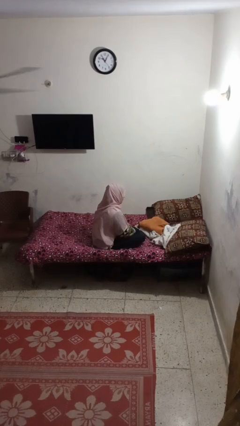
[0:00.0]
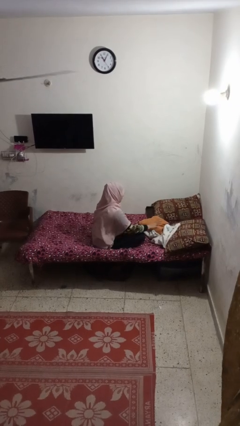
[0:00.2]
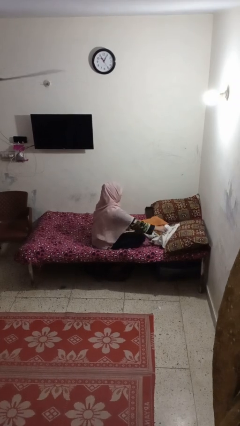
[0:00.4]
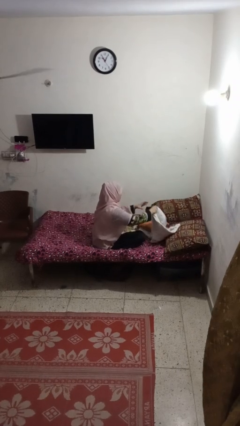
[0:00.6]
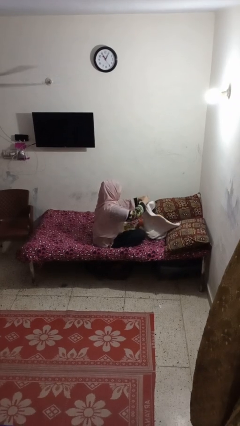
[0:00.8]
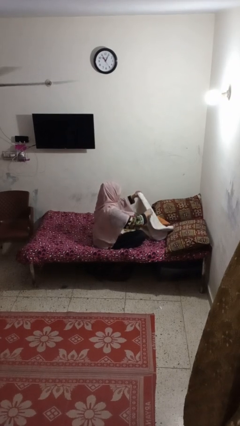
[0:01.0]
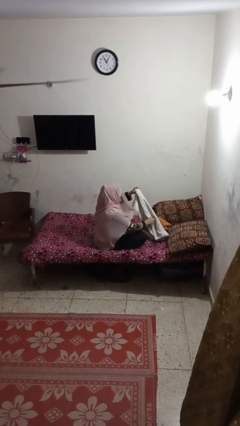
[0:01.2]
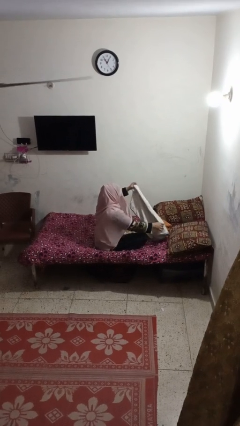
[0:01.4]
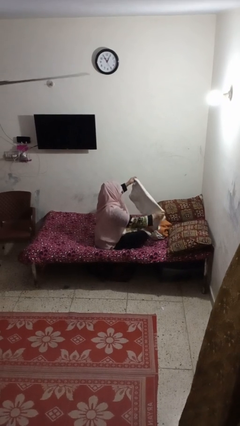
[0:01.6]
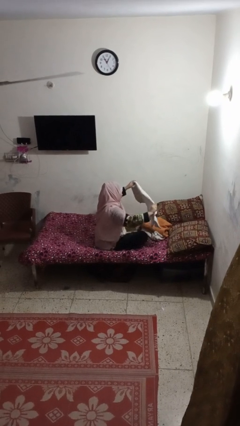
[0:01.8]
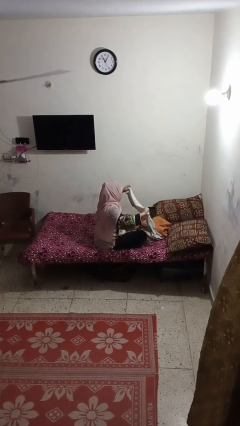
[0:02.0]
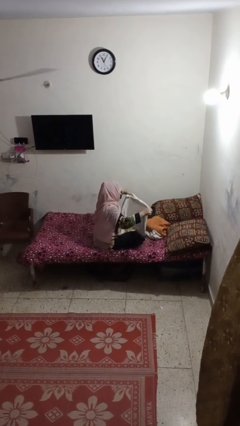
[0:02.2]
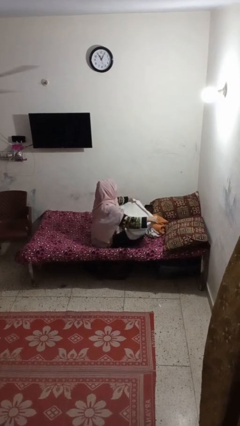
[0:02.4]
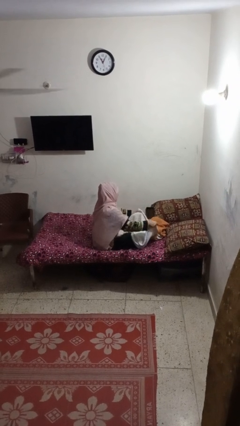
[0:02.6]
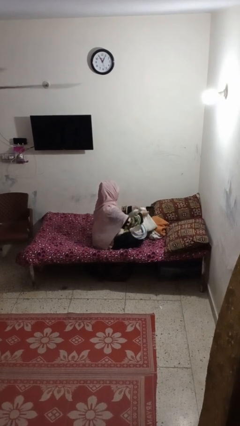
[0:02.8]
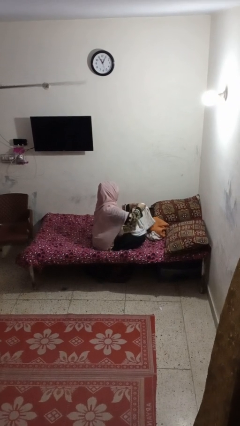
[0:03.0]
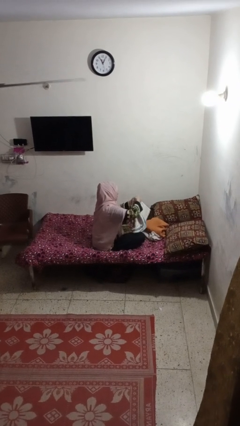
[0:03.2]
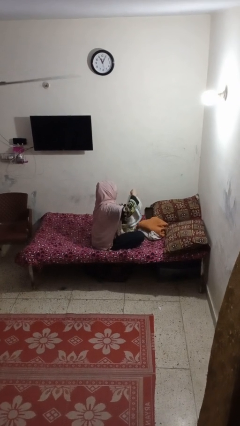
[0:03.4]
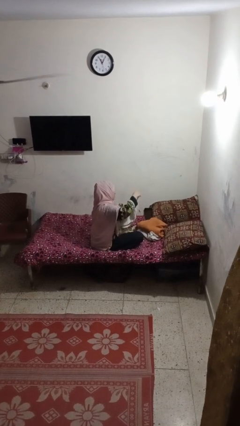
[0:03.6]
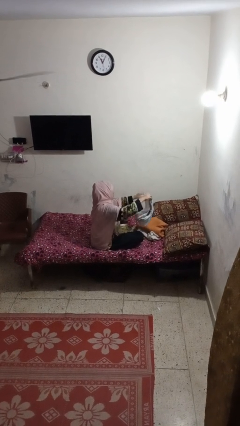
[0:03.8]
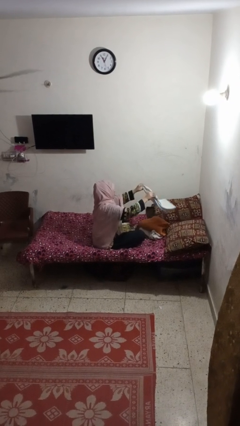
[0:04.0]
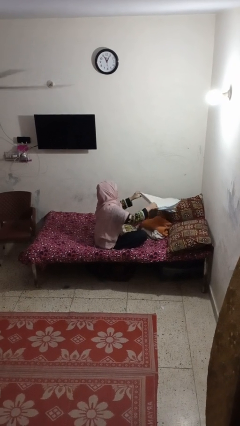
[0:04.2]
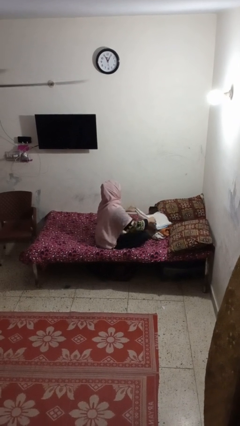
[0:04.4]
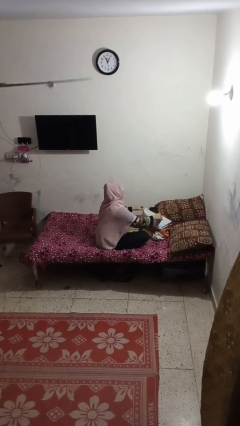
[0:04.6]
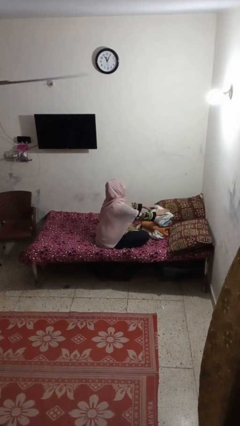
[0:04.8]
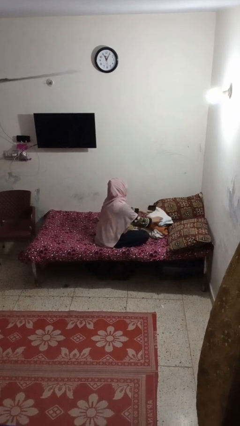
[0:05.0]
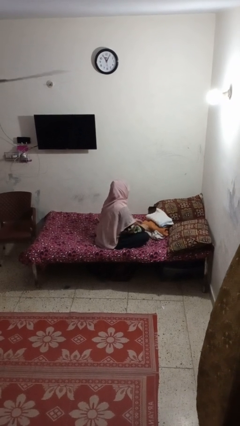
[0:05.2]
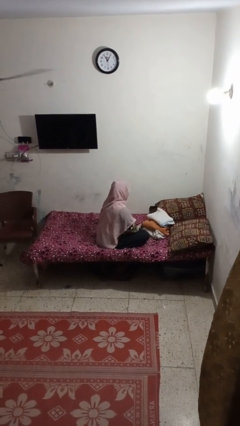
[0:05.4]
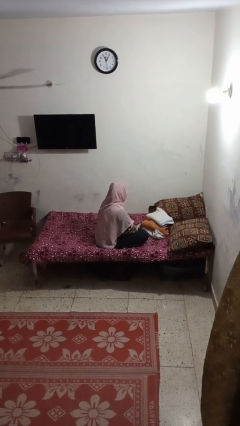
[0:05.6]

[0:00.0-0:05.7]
person folds towel

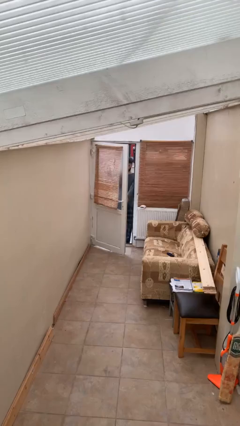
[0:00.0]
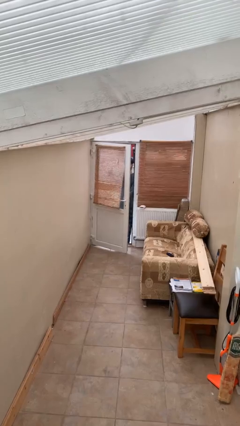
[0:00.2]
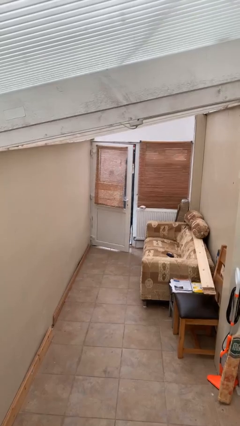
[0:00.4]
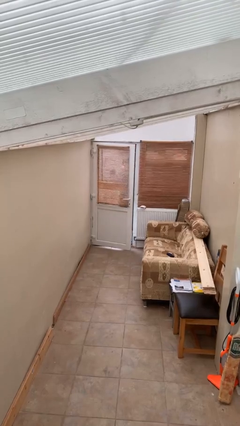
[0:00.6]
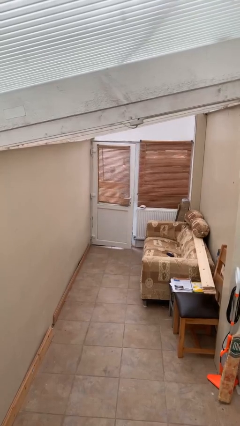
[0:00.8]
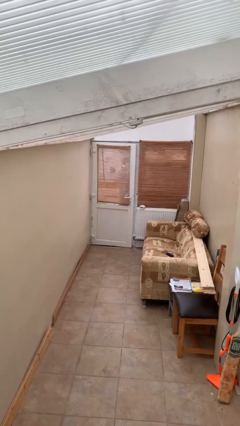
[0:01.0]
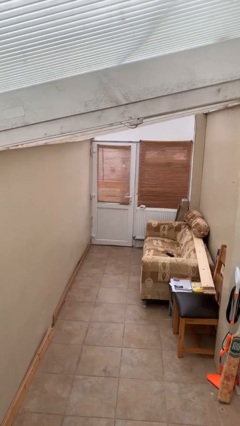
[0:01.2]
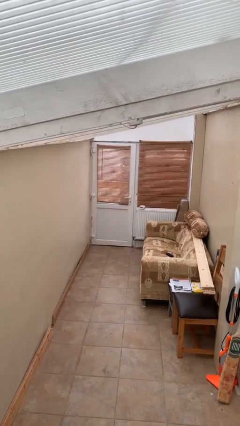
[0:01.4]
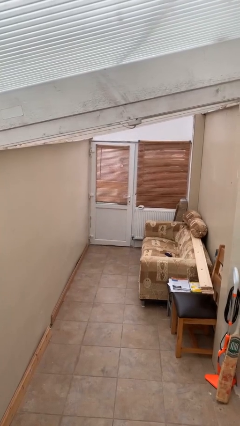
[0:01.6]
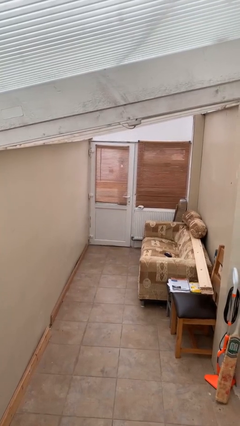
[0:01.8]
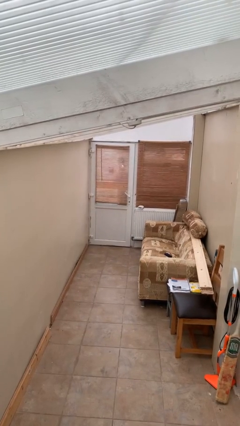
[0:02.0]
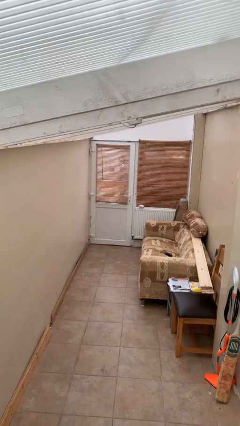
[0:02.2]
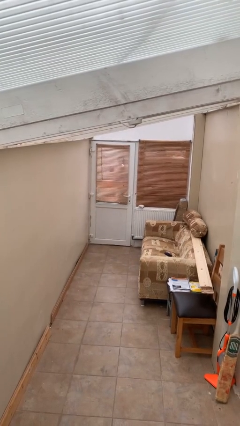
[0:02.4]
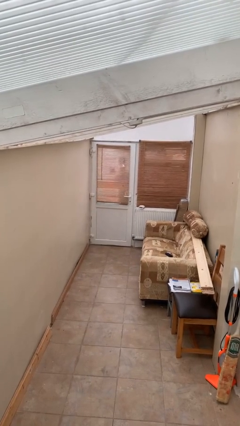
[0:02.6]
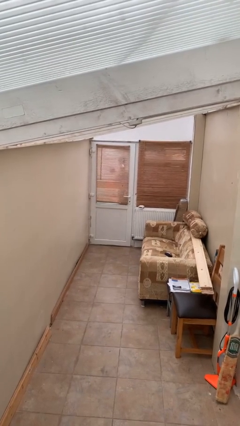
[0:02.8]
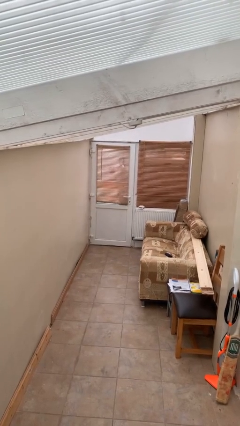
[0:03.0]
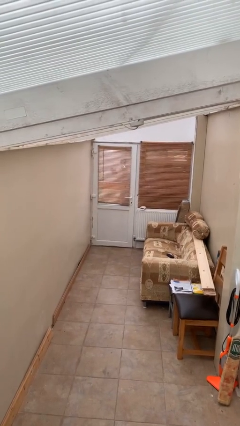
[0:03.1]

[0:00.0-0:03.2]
person closes facility door

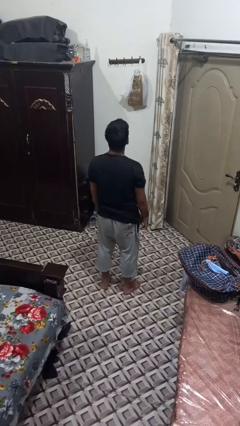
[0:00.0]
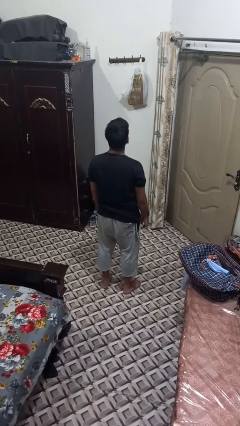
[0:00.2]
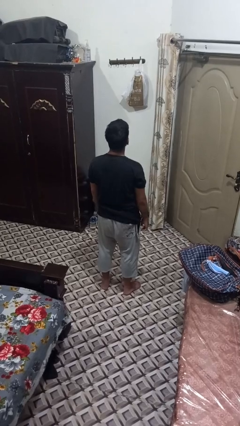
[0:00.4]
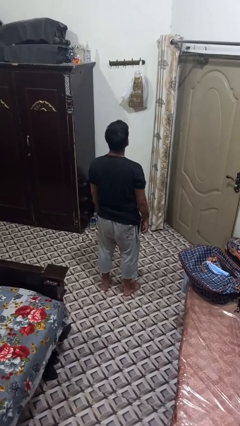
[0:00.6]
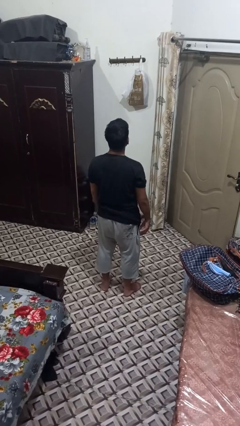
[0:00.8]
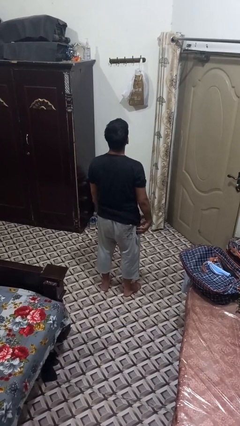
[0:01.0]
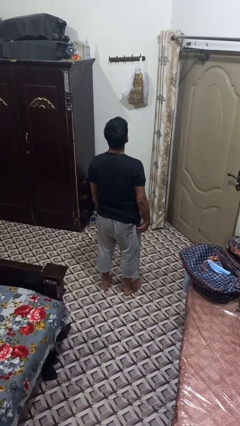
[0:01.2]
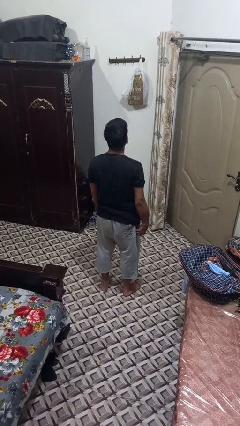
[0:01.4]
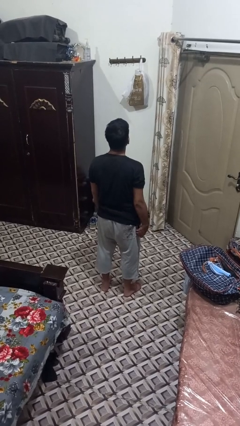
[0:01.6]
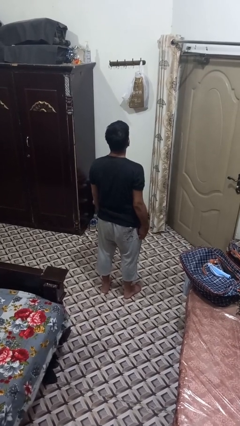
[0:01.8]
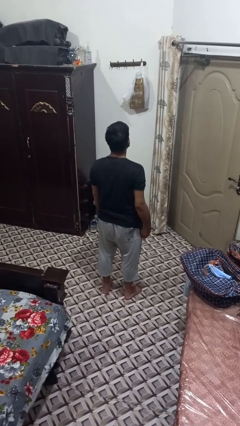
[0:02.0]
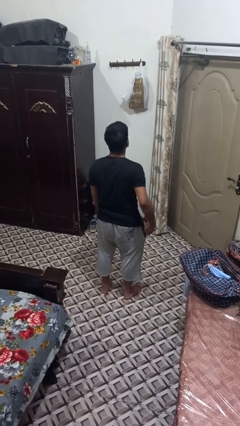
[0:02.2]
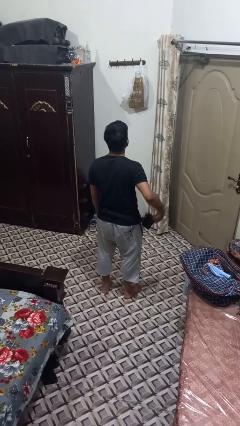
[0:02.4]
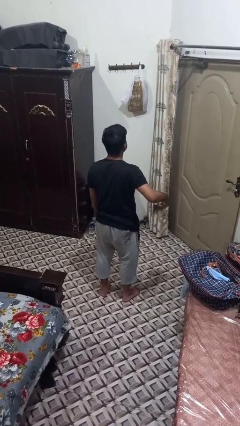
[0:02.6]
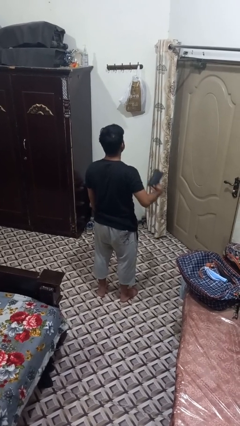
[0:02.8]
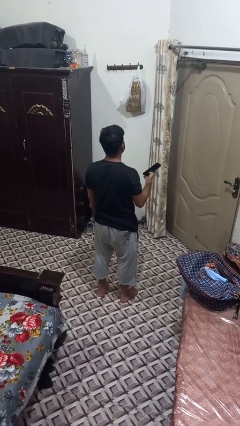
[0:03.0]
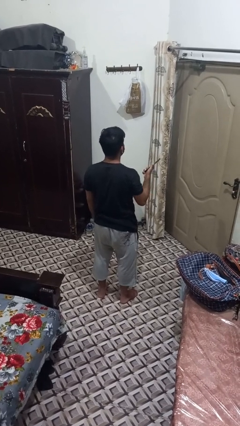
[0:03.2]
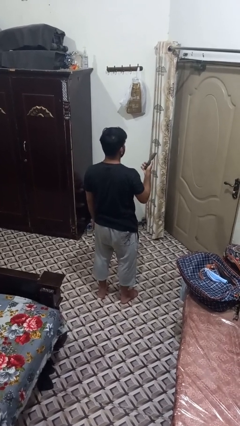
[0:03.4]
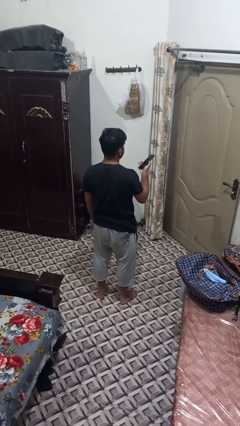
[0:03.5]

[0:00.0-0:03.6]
person takes phone from pocket

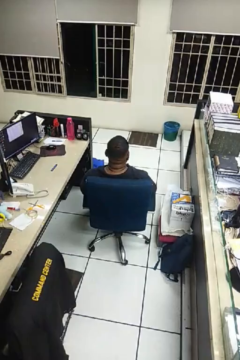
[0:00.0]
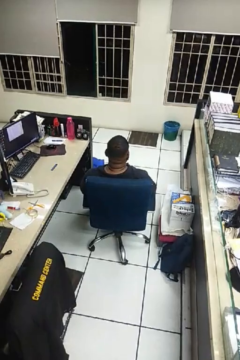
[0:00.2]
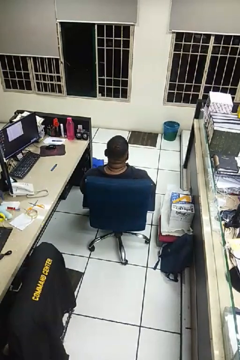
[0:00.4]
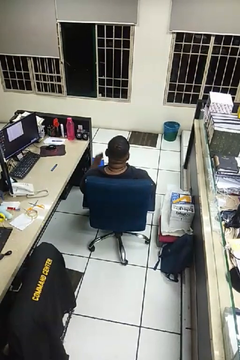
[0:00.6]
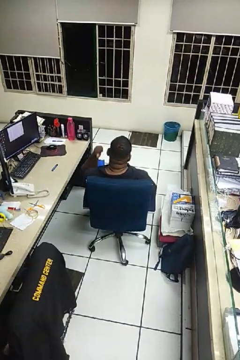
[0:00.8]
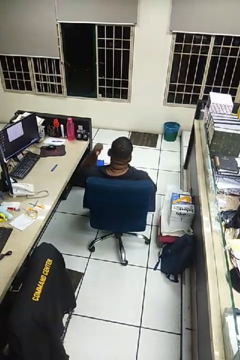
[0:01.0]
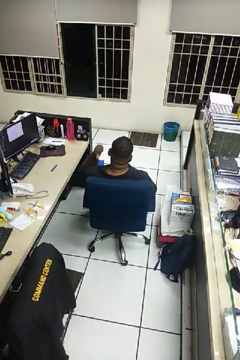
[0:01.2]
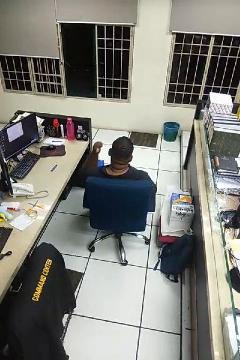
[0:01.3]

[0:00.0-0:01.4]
person gestures behind me

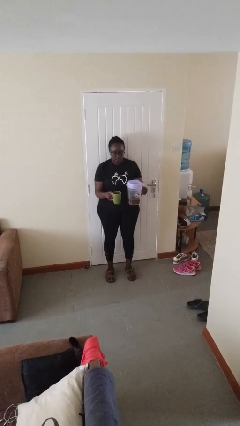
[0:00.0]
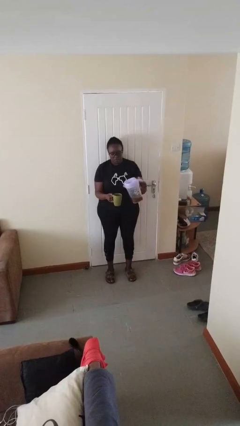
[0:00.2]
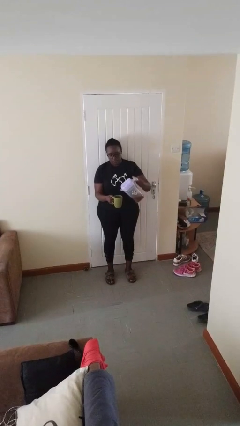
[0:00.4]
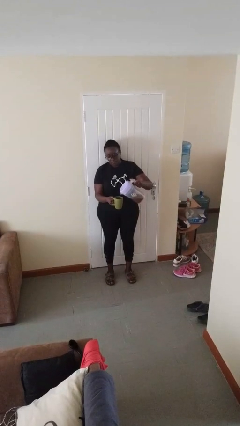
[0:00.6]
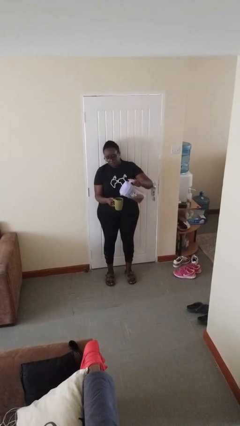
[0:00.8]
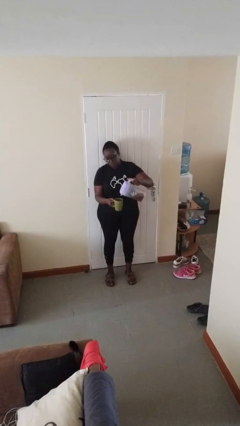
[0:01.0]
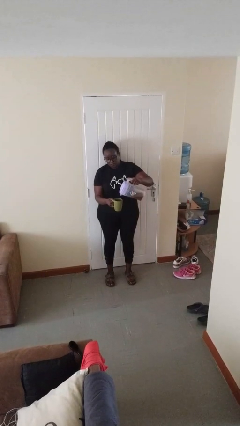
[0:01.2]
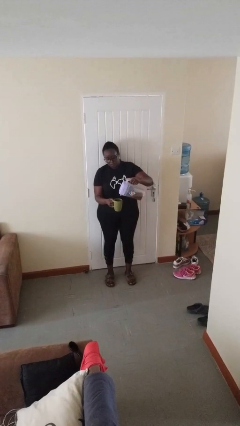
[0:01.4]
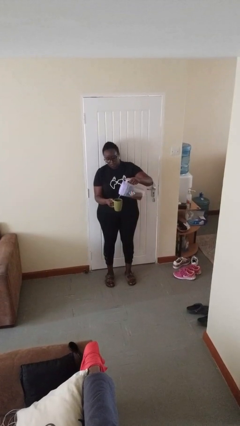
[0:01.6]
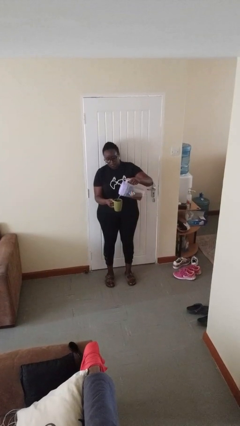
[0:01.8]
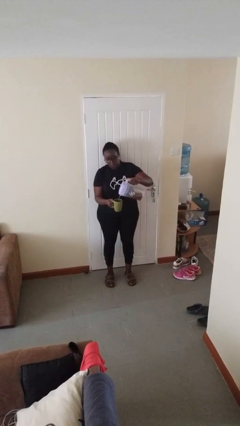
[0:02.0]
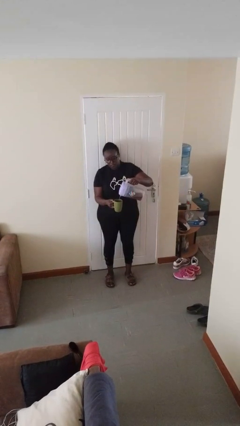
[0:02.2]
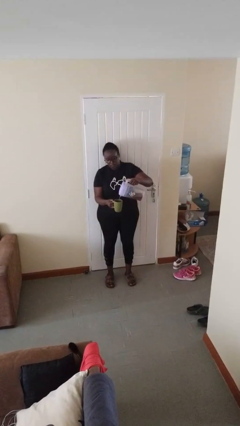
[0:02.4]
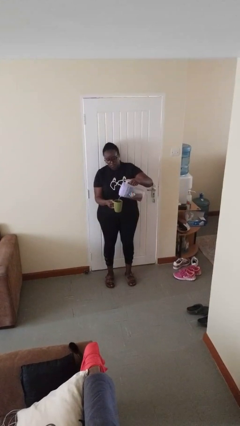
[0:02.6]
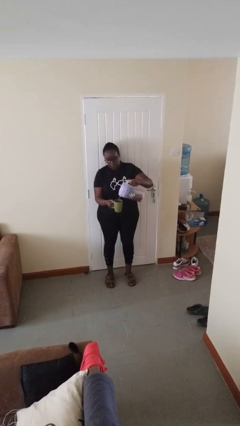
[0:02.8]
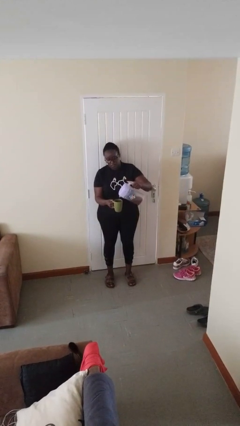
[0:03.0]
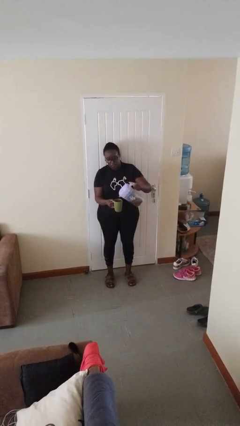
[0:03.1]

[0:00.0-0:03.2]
person pours coffee into mug

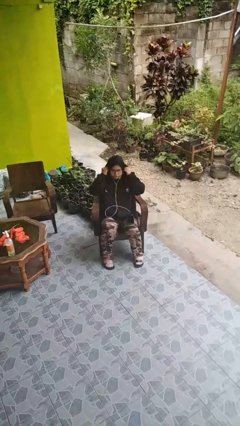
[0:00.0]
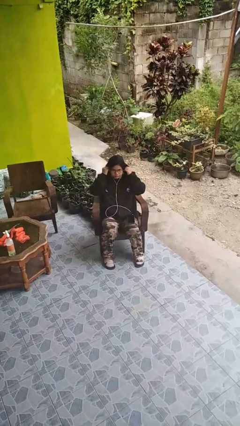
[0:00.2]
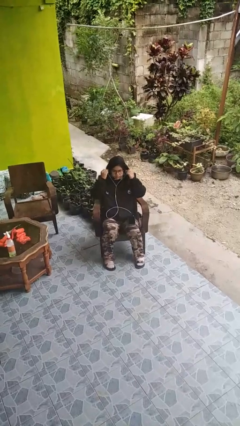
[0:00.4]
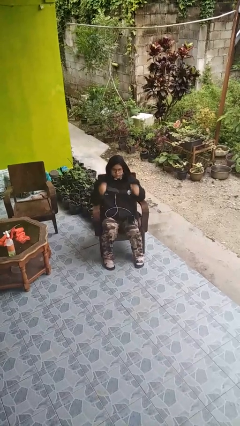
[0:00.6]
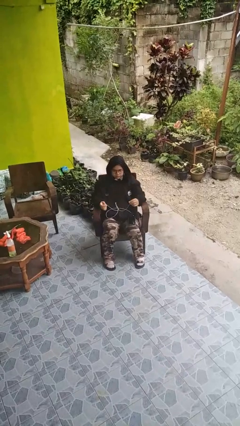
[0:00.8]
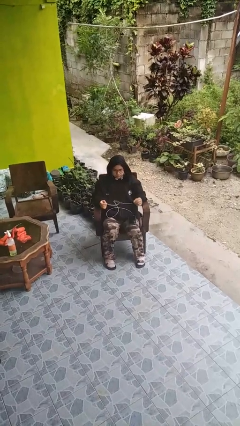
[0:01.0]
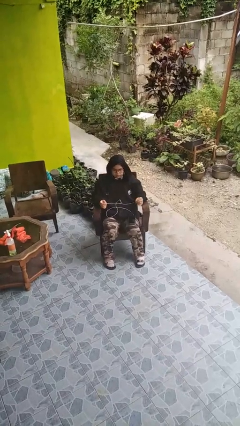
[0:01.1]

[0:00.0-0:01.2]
person takes off headphones
